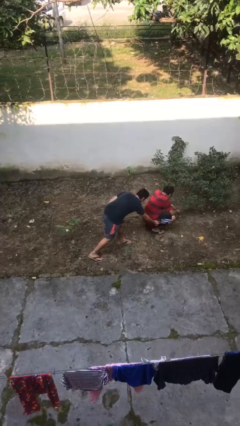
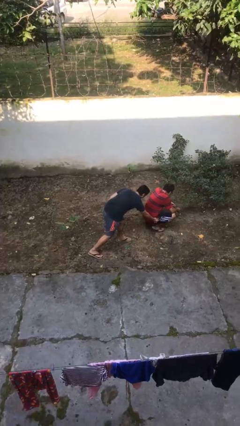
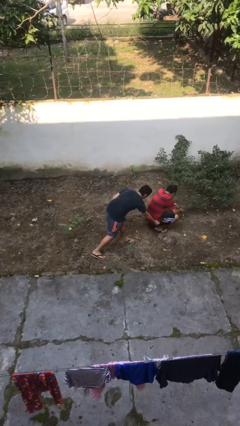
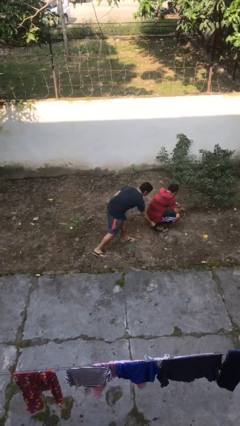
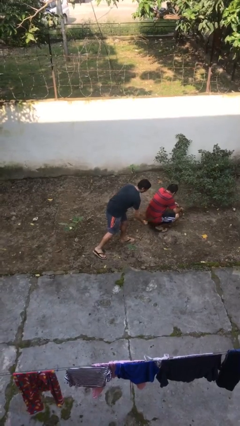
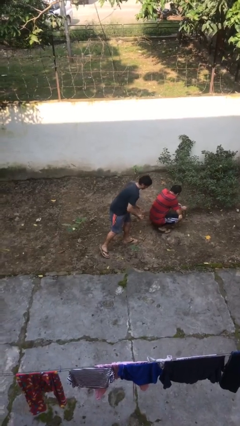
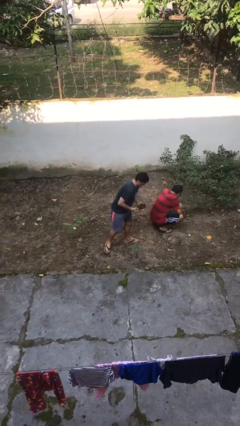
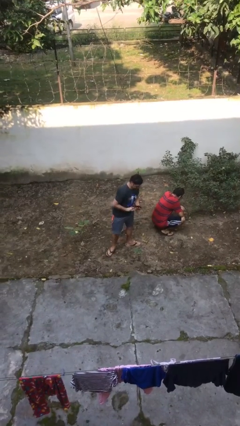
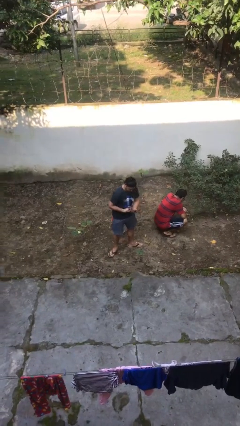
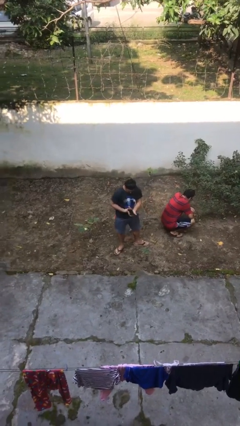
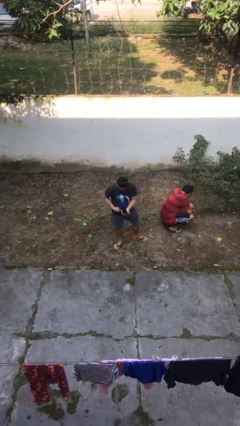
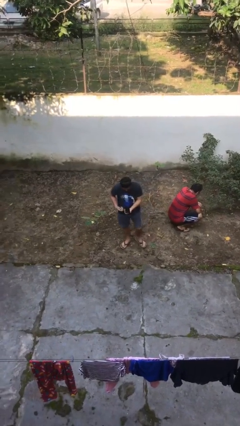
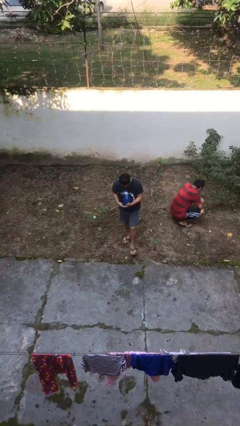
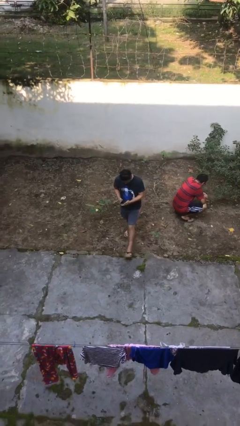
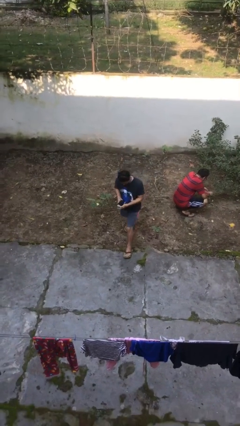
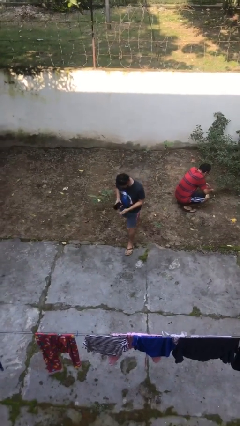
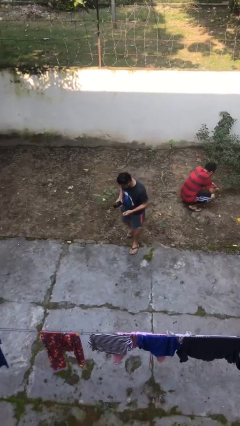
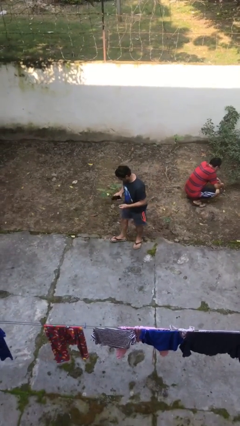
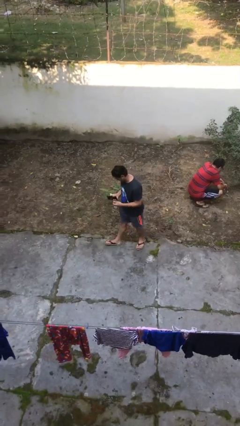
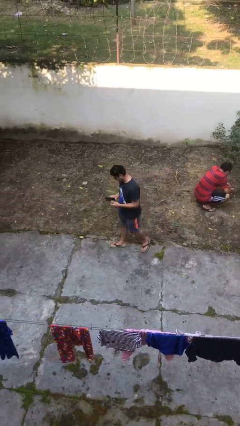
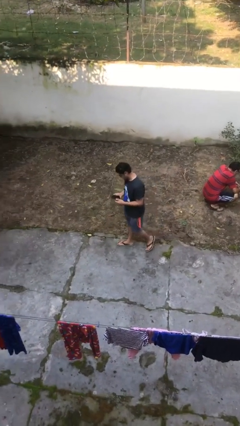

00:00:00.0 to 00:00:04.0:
person steals object from person

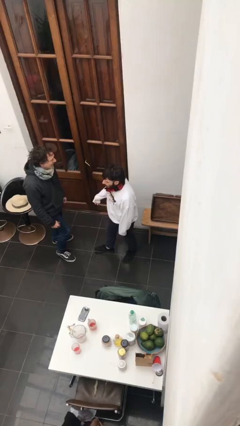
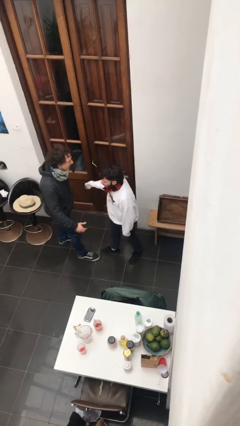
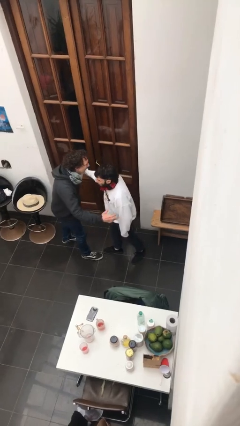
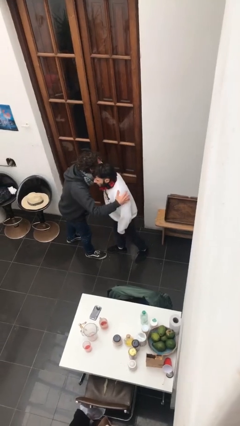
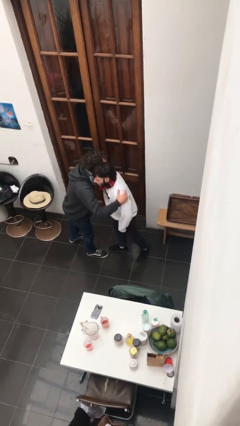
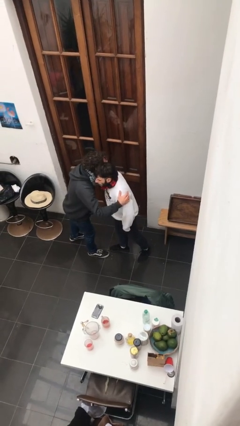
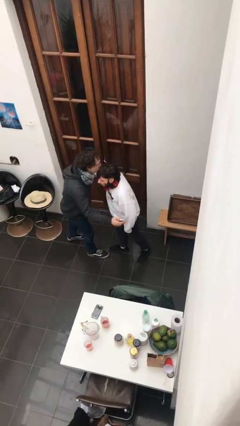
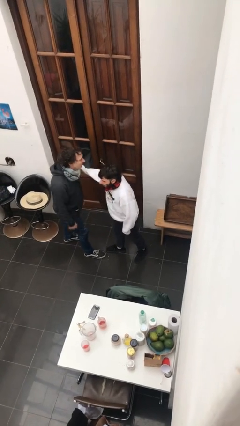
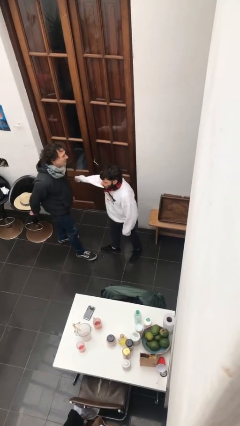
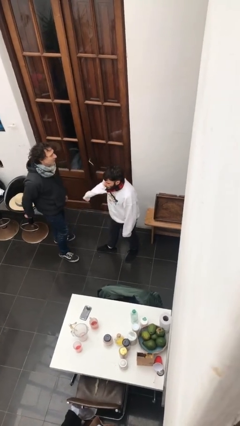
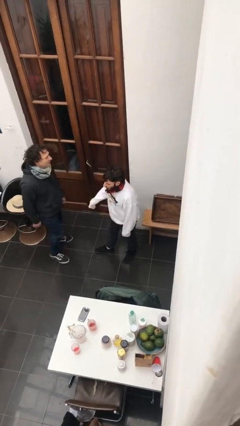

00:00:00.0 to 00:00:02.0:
person kisses cheek of person

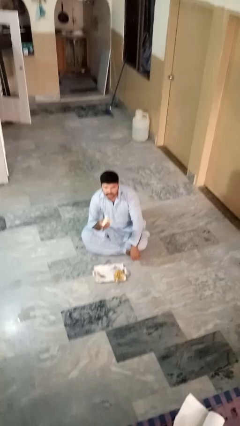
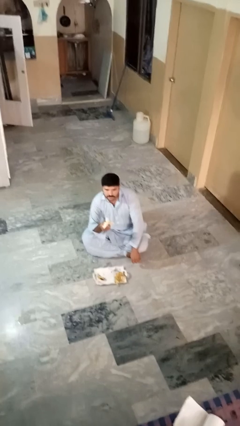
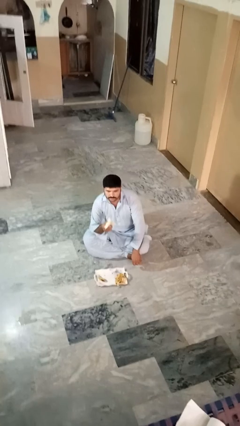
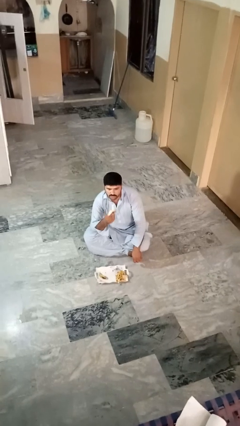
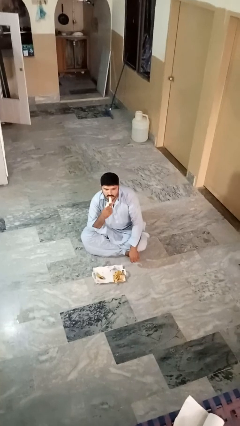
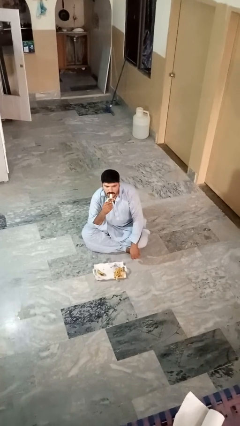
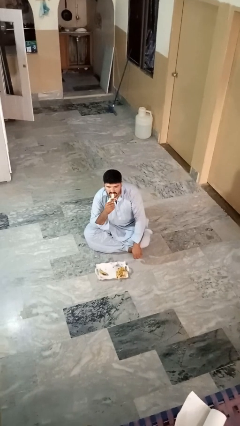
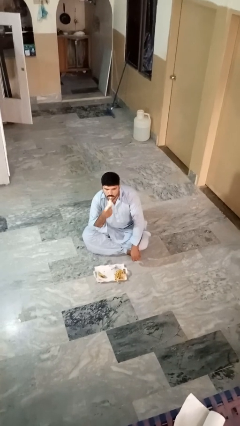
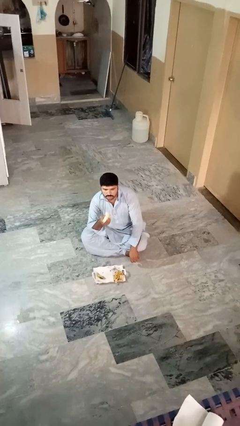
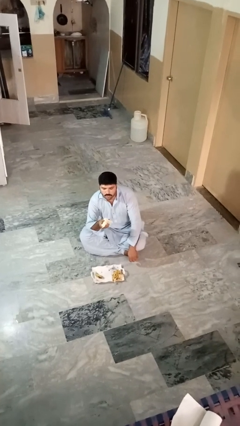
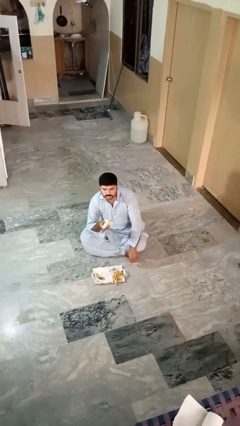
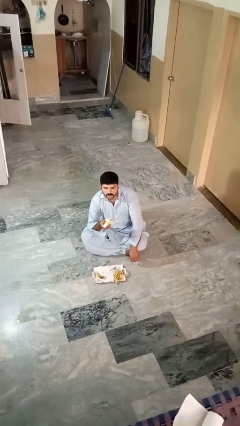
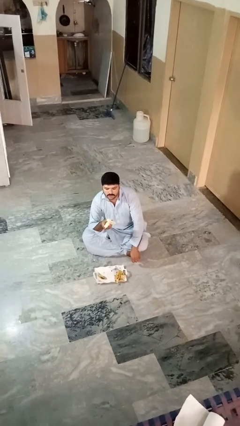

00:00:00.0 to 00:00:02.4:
person eats banana

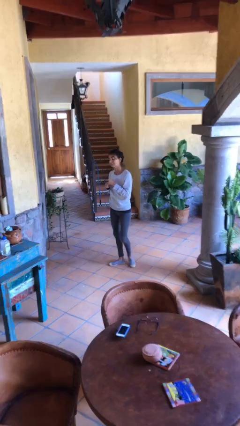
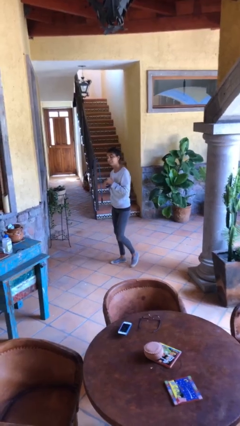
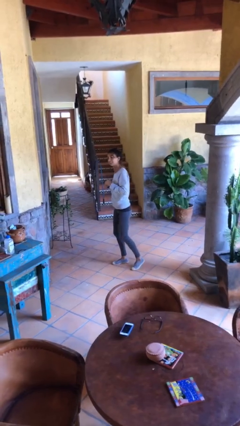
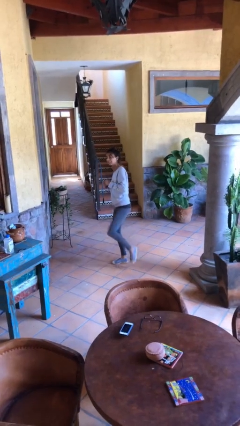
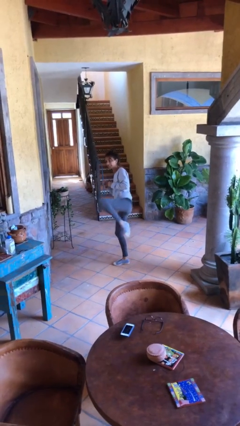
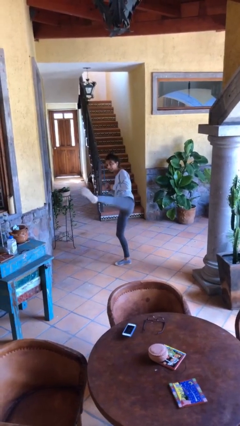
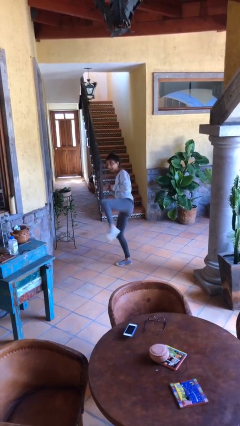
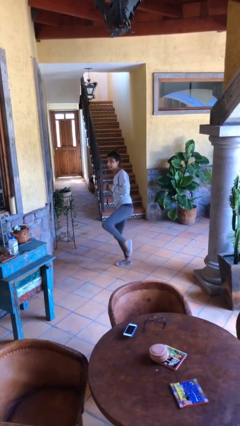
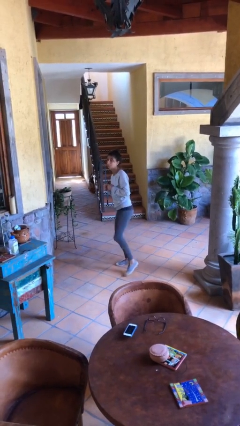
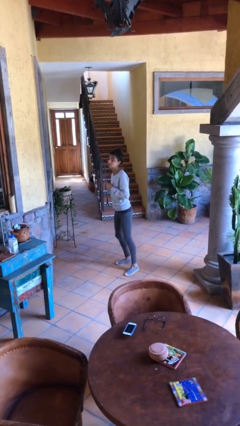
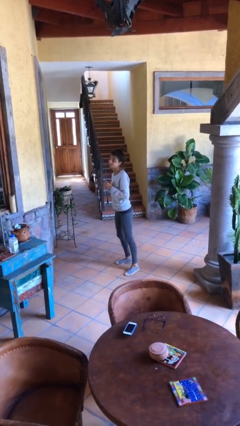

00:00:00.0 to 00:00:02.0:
person karate kicks

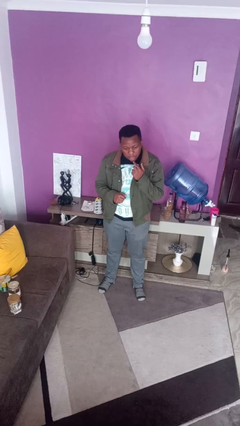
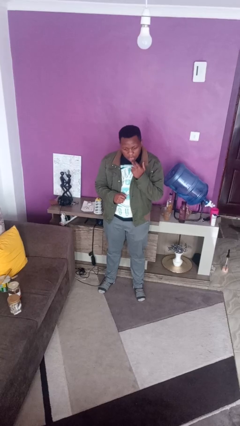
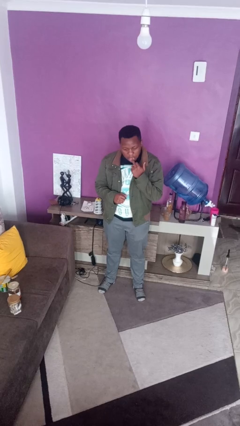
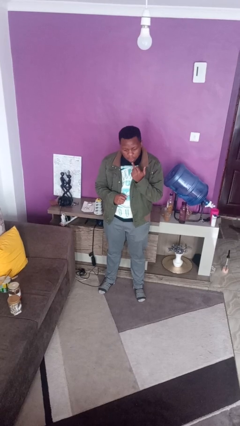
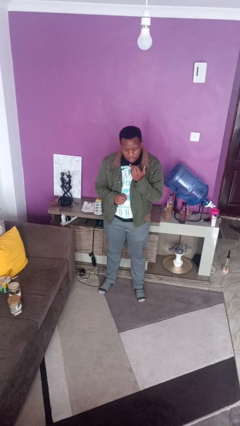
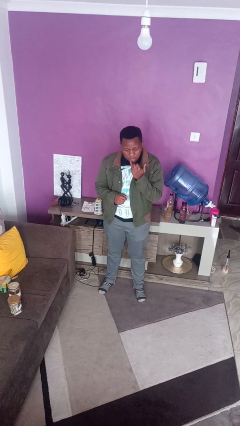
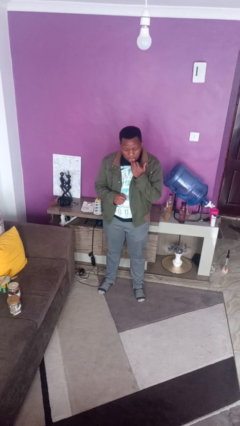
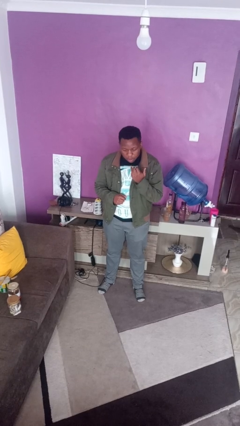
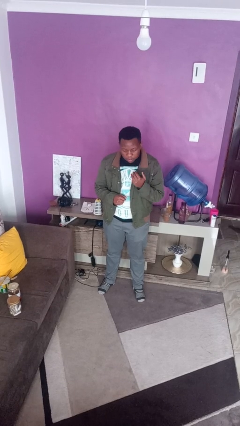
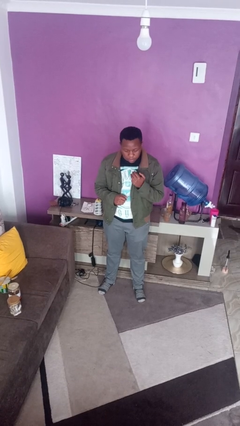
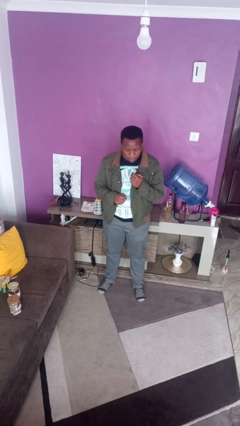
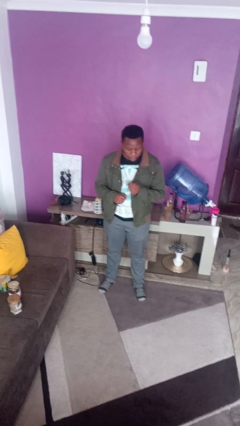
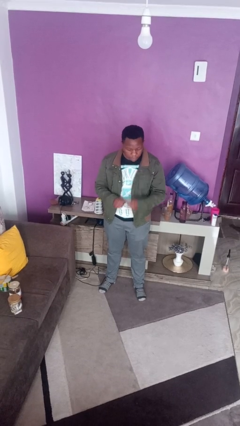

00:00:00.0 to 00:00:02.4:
person licks fingers

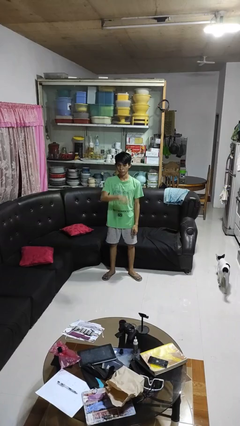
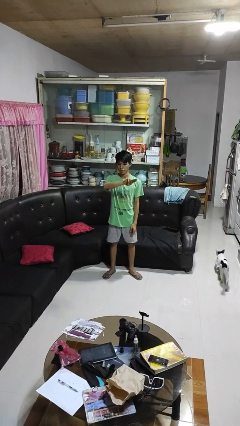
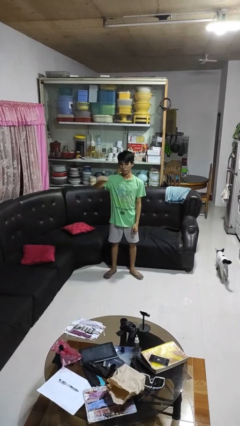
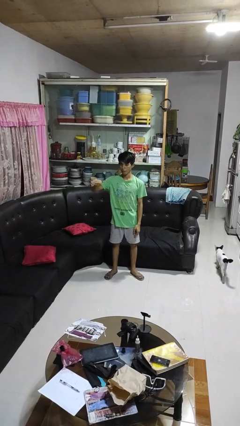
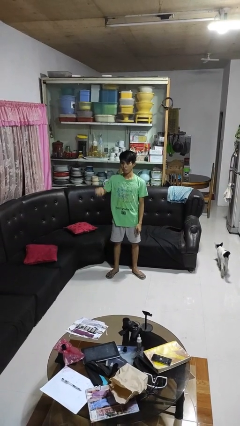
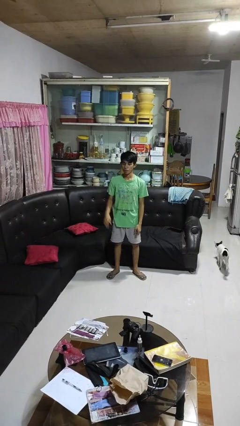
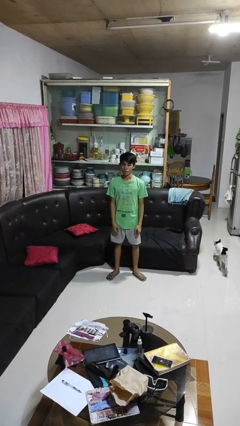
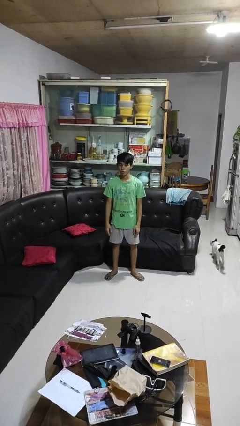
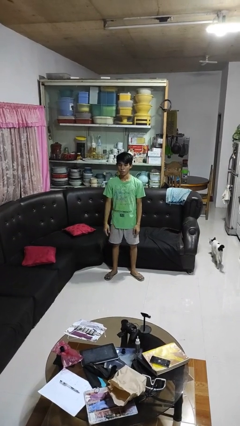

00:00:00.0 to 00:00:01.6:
person gestures swipe right

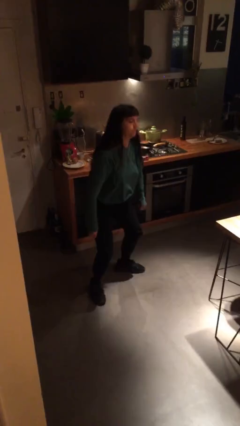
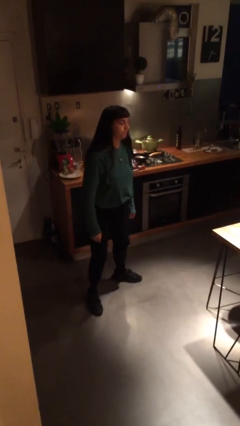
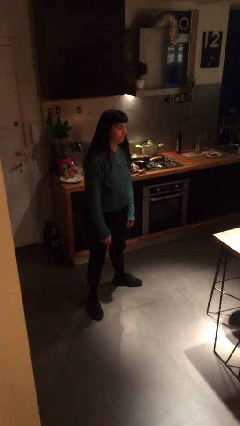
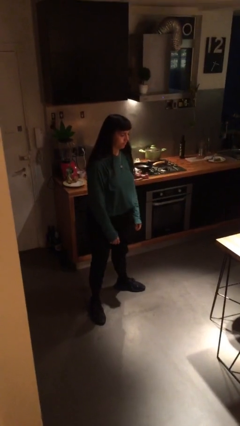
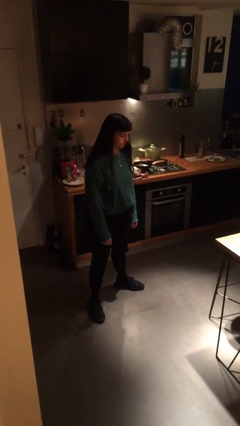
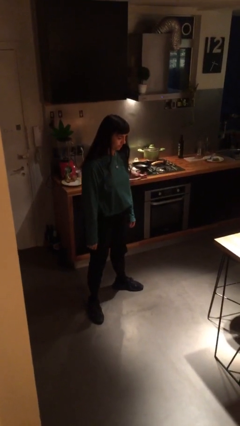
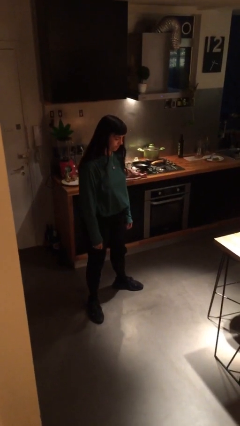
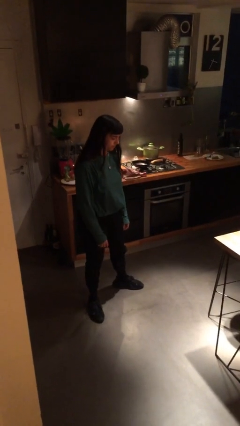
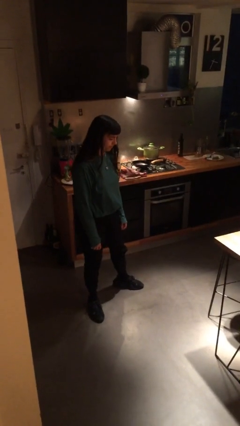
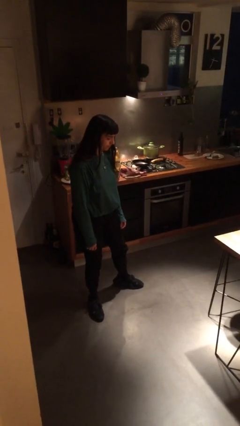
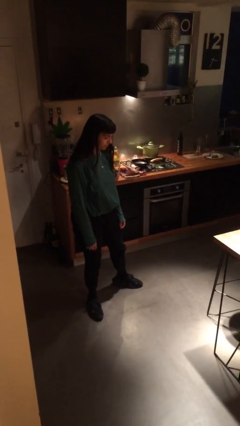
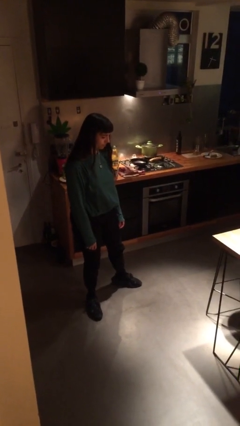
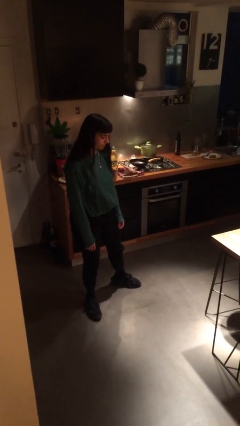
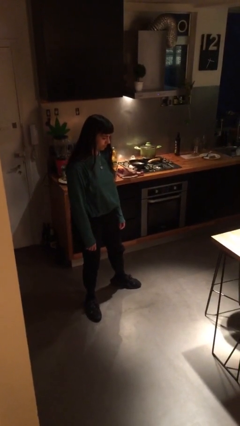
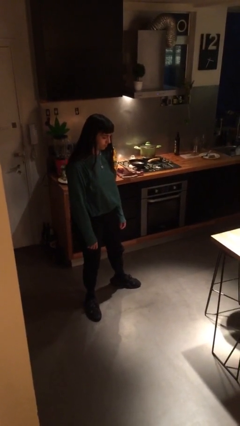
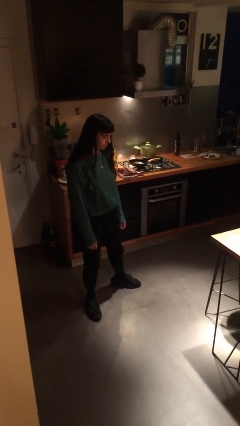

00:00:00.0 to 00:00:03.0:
person stands up
